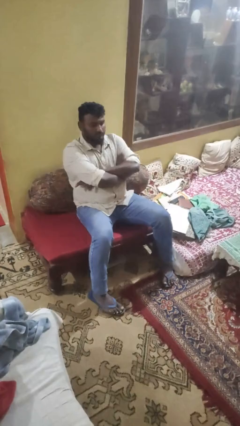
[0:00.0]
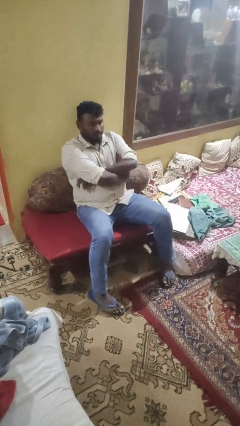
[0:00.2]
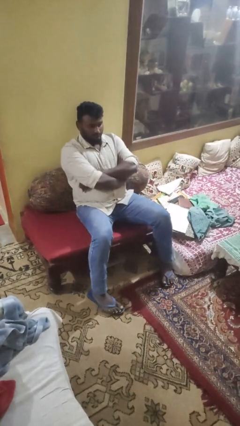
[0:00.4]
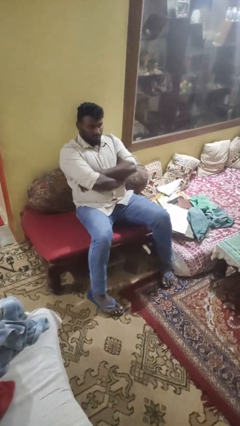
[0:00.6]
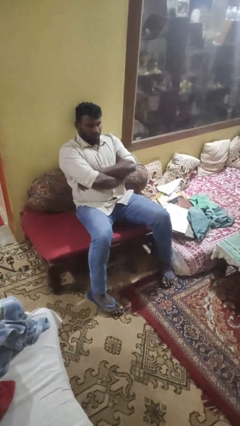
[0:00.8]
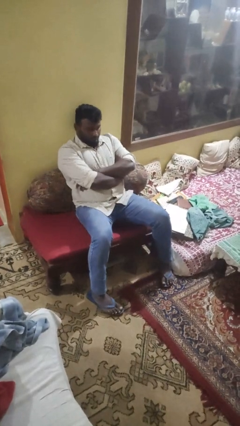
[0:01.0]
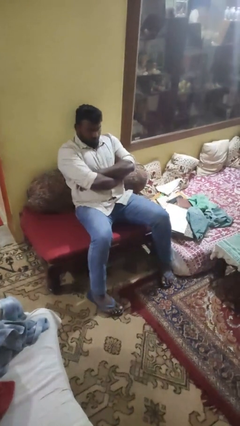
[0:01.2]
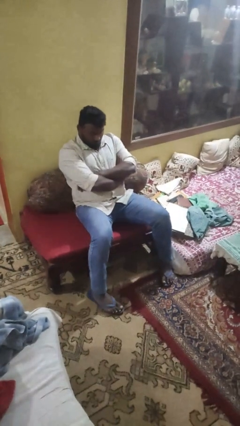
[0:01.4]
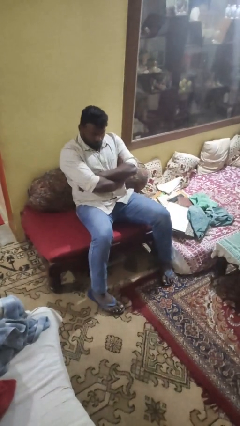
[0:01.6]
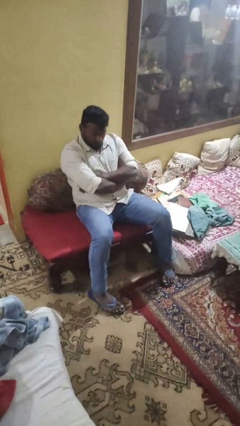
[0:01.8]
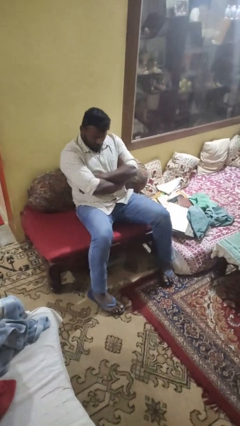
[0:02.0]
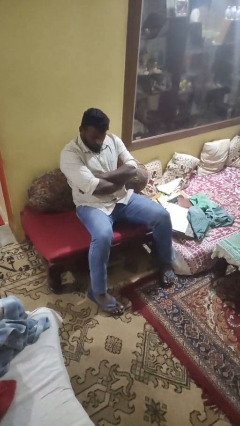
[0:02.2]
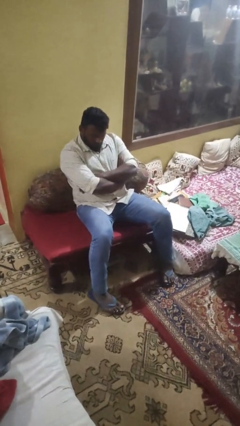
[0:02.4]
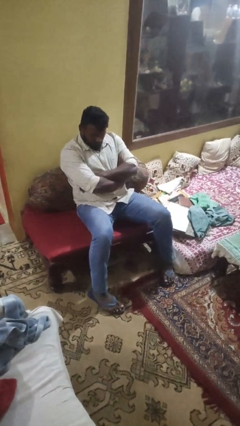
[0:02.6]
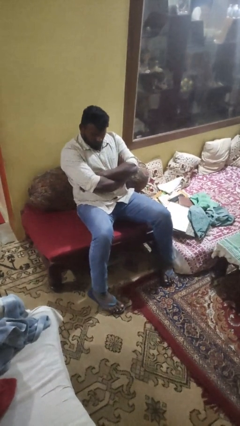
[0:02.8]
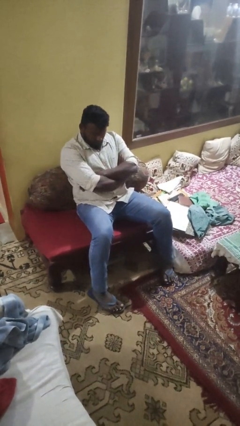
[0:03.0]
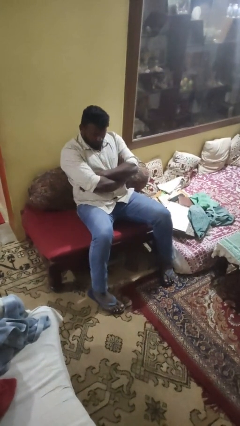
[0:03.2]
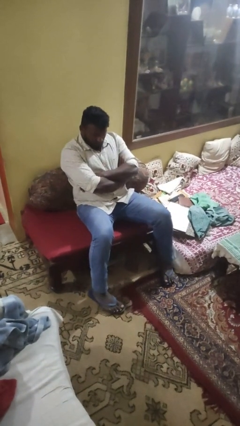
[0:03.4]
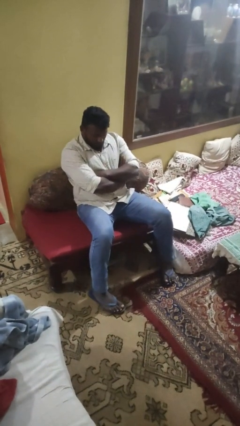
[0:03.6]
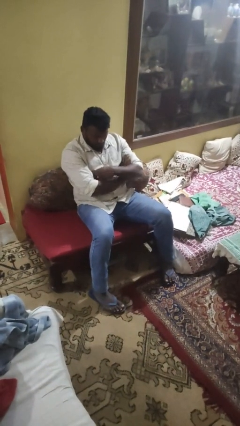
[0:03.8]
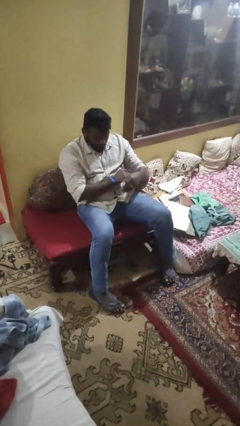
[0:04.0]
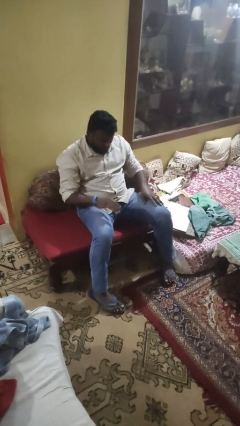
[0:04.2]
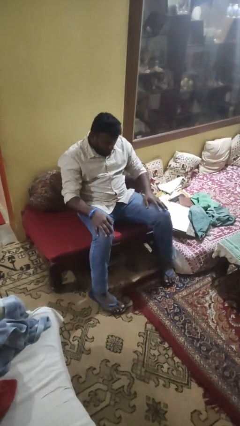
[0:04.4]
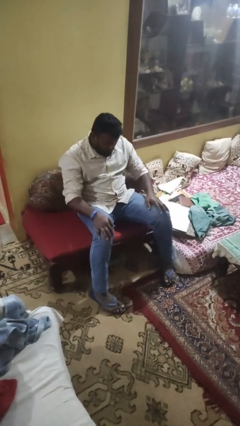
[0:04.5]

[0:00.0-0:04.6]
person crosses arms

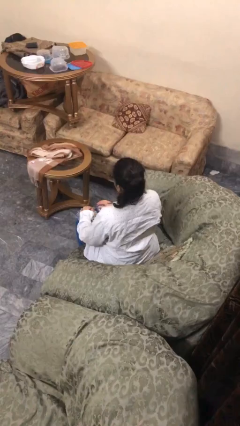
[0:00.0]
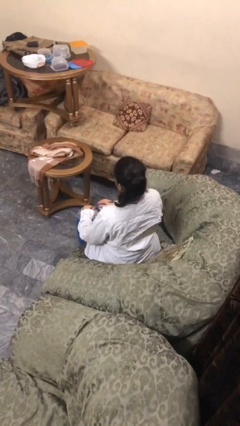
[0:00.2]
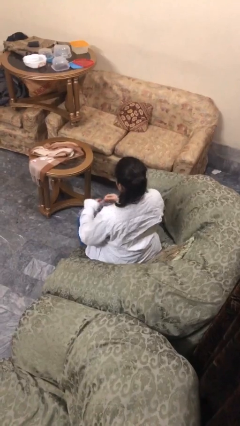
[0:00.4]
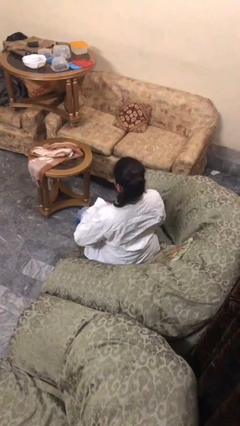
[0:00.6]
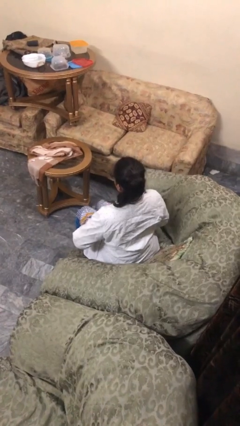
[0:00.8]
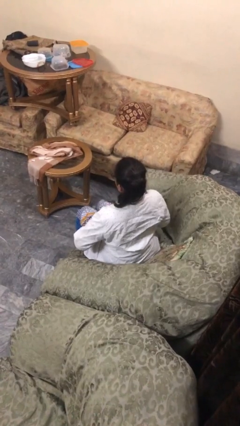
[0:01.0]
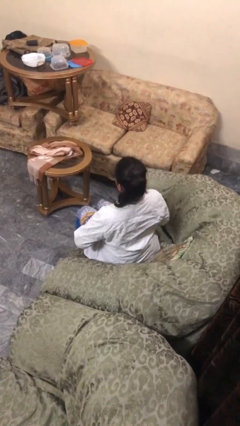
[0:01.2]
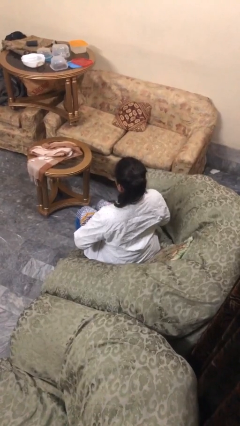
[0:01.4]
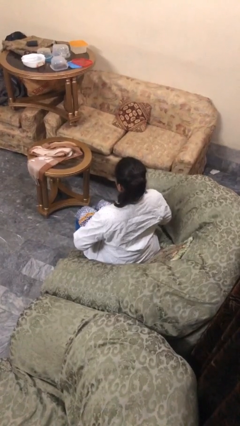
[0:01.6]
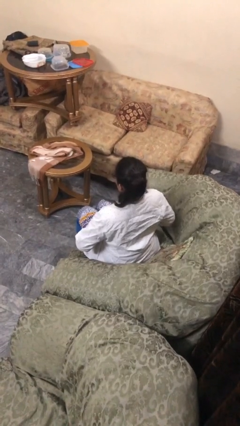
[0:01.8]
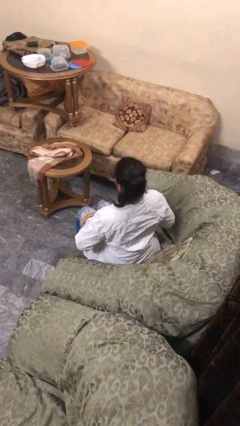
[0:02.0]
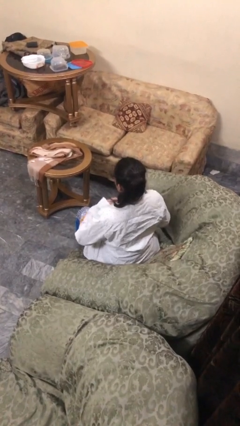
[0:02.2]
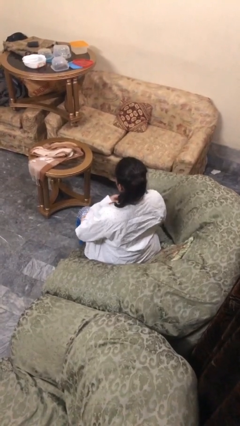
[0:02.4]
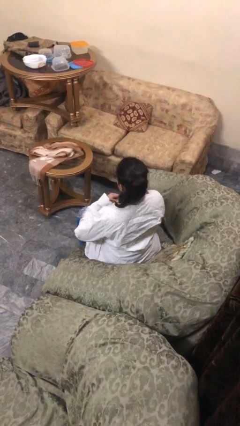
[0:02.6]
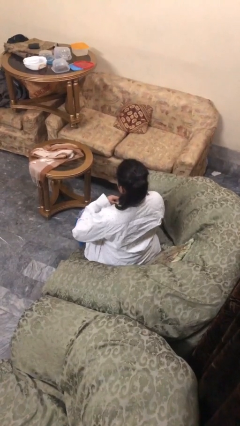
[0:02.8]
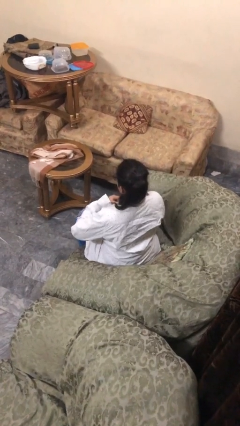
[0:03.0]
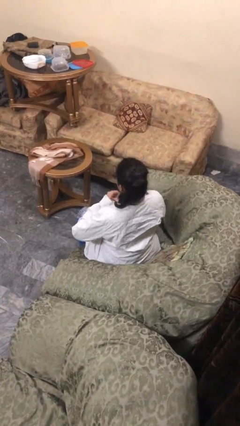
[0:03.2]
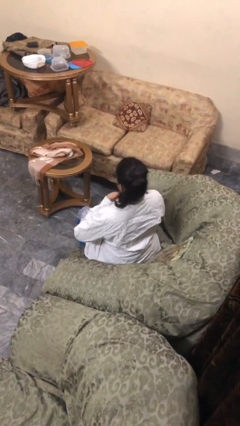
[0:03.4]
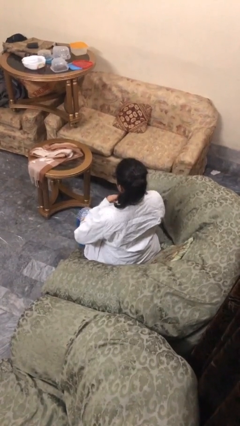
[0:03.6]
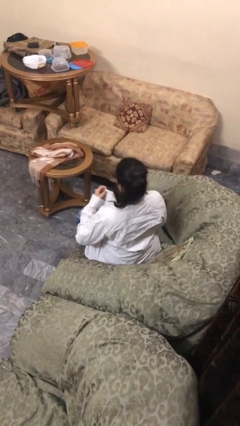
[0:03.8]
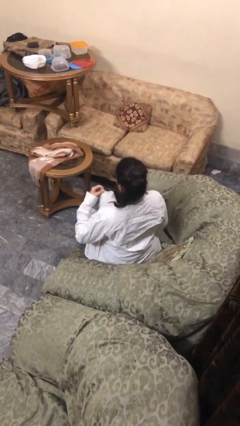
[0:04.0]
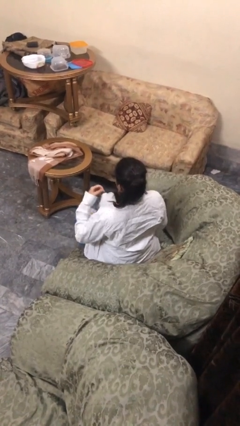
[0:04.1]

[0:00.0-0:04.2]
person unbuttons shirt

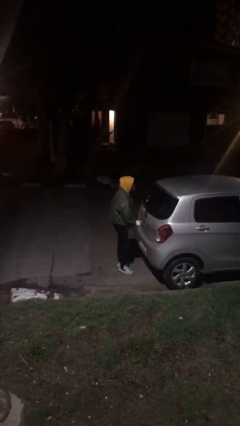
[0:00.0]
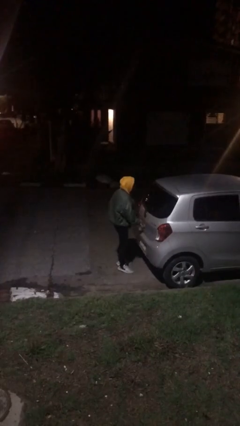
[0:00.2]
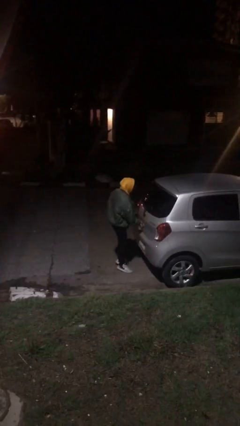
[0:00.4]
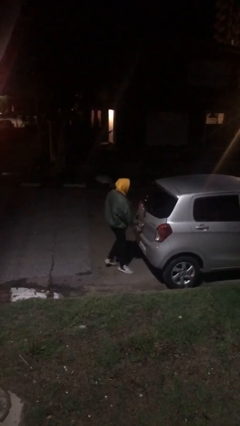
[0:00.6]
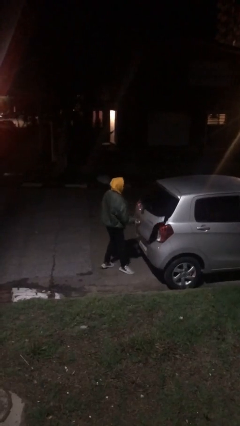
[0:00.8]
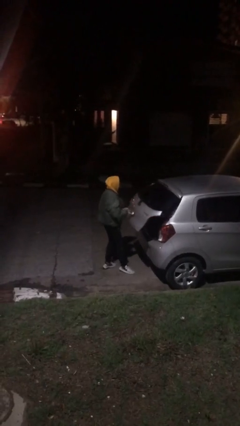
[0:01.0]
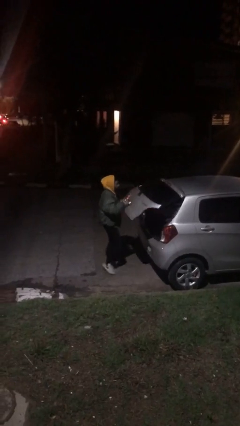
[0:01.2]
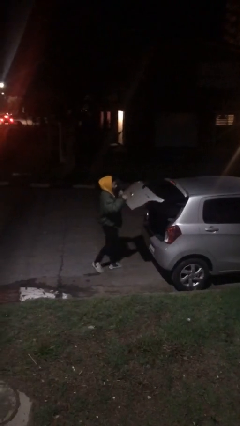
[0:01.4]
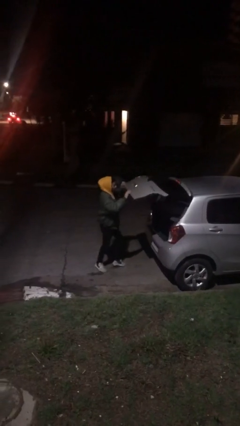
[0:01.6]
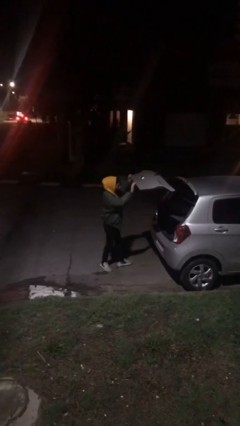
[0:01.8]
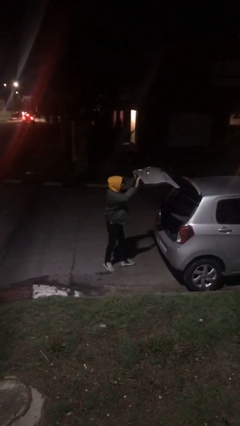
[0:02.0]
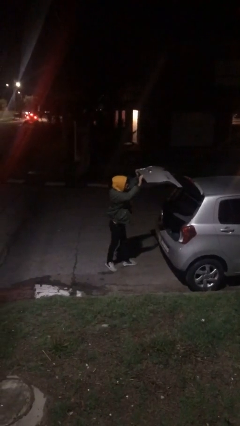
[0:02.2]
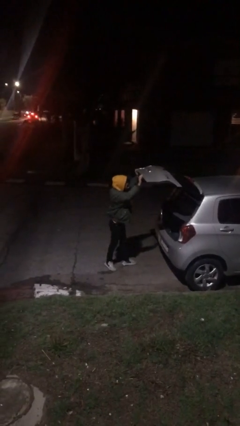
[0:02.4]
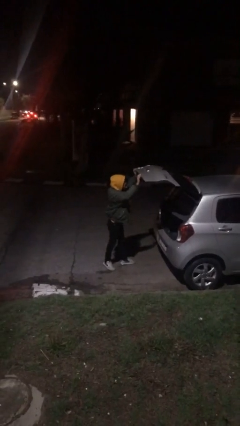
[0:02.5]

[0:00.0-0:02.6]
person opens car trunk

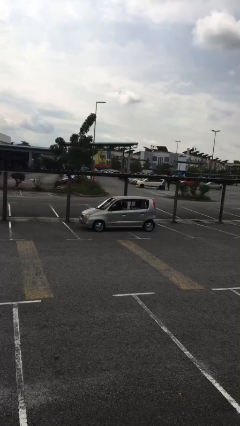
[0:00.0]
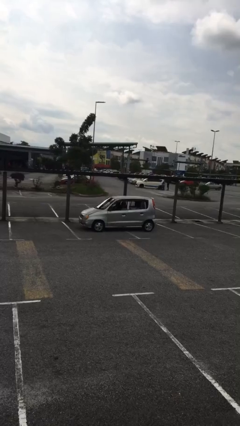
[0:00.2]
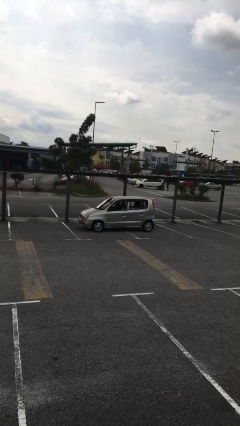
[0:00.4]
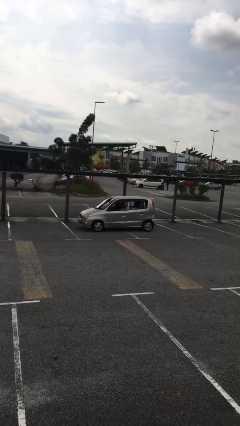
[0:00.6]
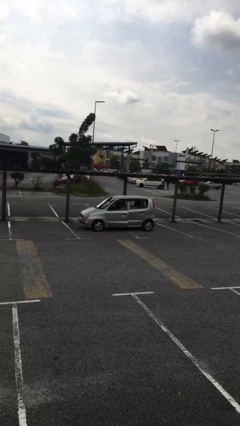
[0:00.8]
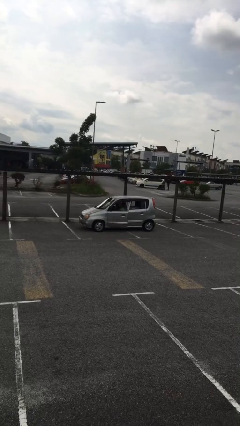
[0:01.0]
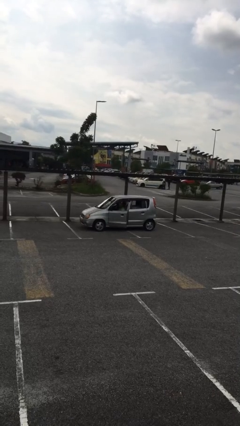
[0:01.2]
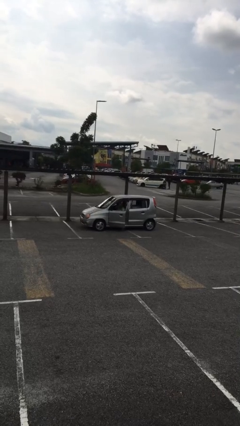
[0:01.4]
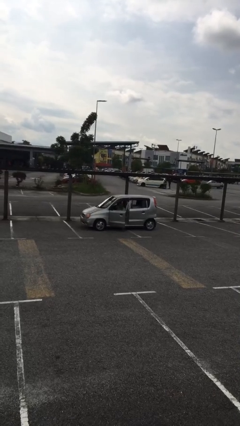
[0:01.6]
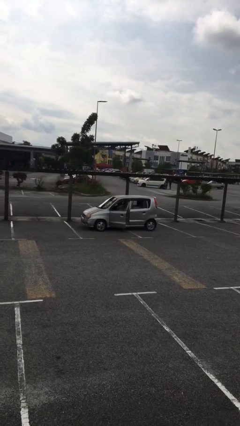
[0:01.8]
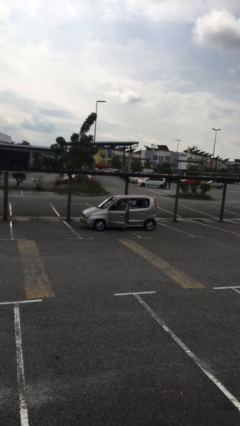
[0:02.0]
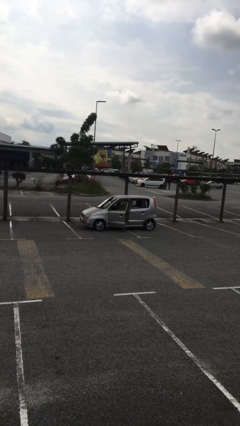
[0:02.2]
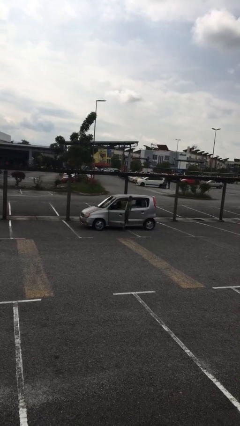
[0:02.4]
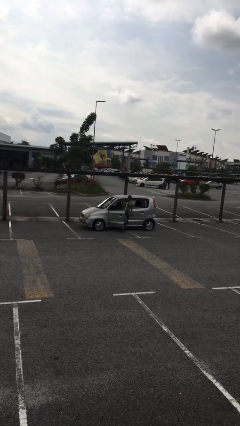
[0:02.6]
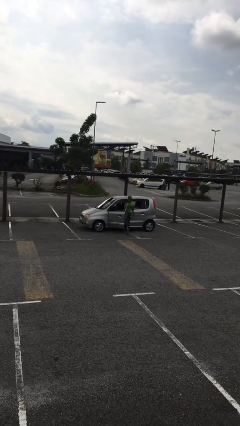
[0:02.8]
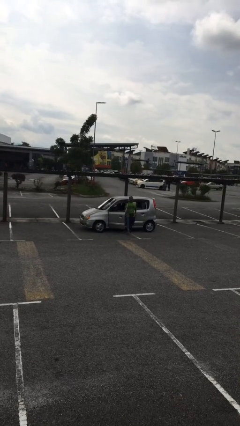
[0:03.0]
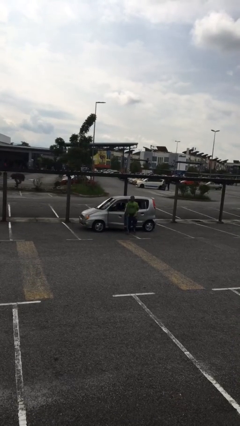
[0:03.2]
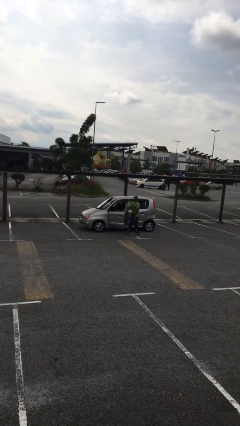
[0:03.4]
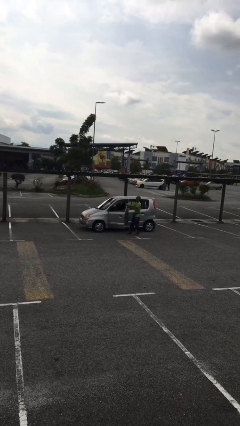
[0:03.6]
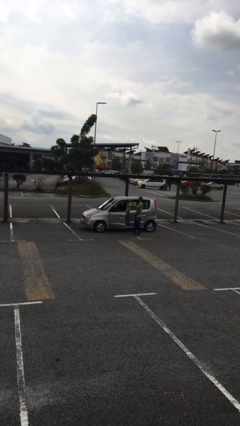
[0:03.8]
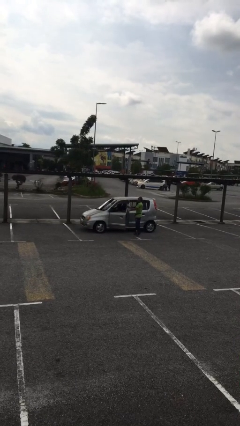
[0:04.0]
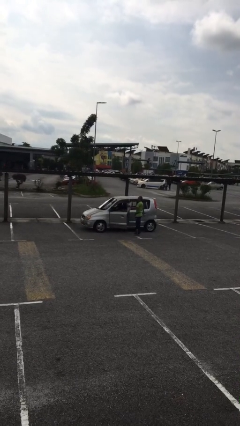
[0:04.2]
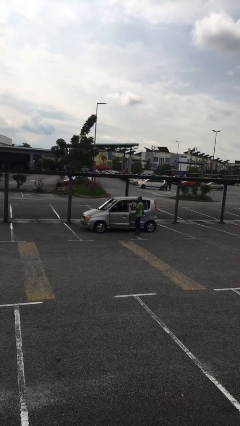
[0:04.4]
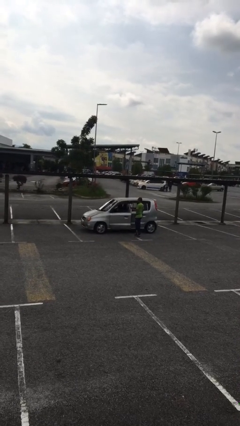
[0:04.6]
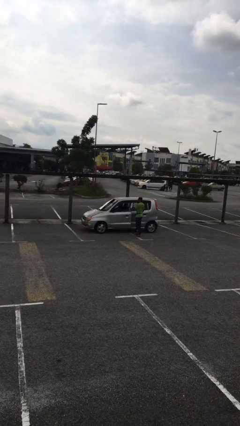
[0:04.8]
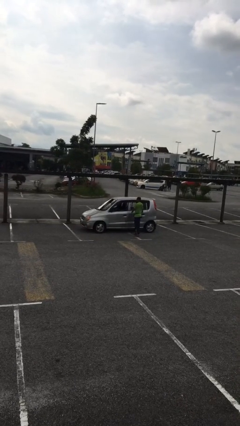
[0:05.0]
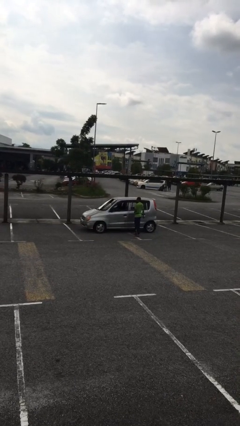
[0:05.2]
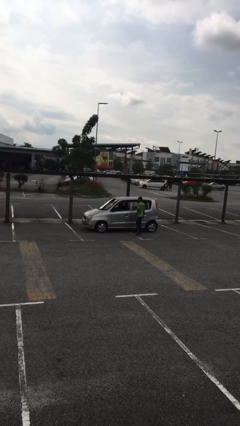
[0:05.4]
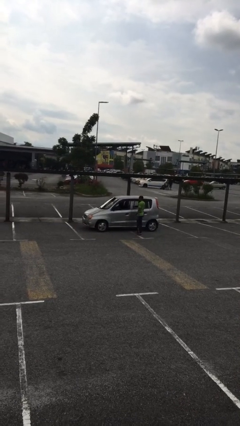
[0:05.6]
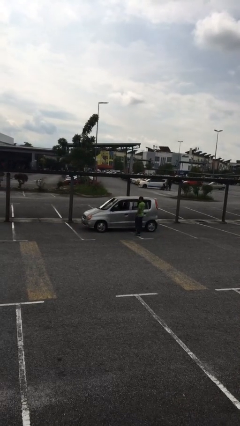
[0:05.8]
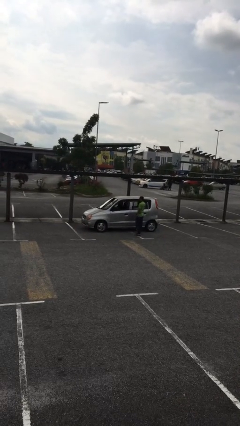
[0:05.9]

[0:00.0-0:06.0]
car drops off person
